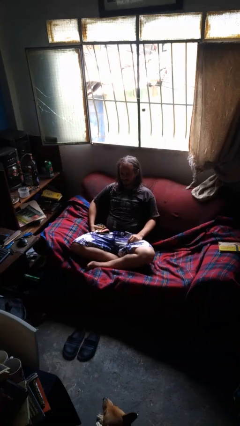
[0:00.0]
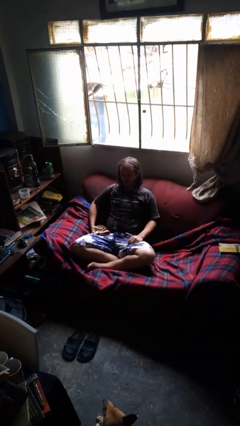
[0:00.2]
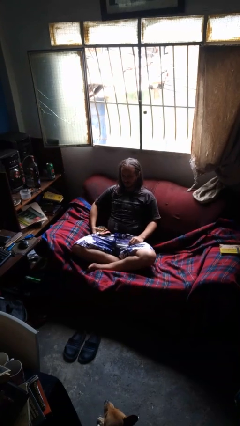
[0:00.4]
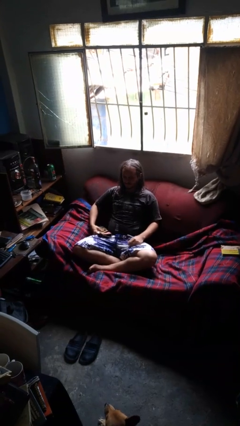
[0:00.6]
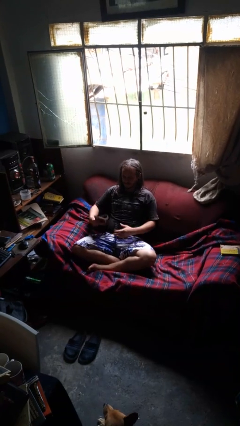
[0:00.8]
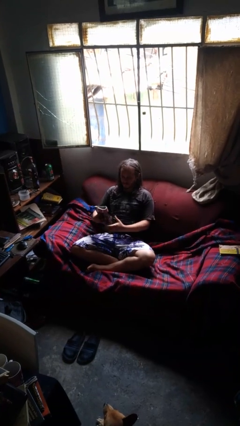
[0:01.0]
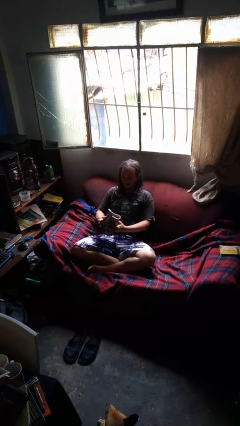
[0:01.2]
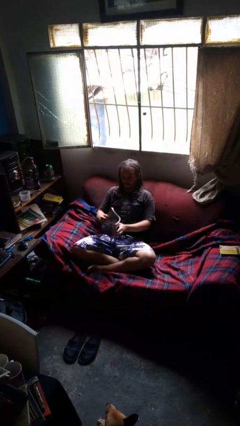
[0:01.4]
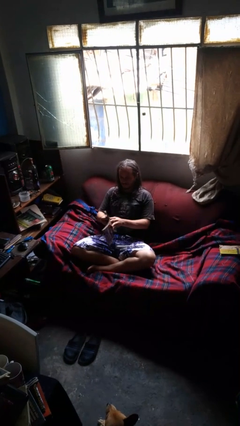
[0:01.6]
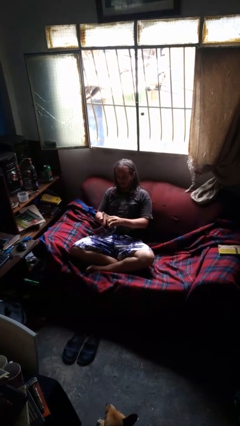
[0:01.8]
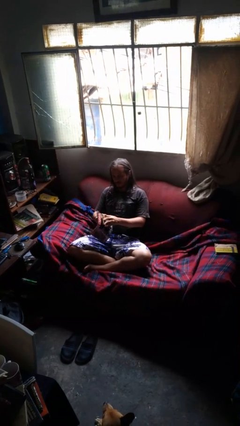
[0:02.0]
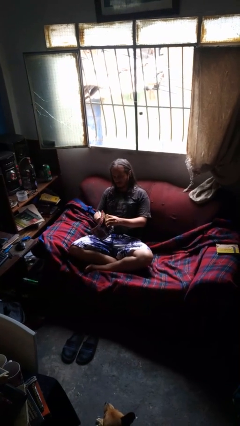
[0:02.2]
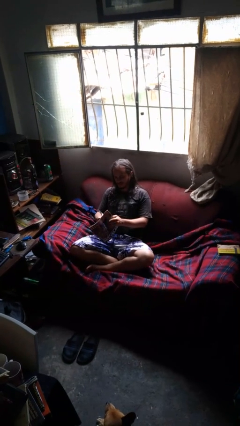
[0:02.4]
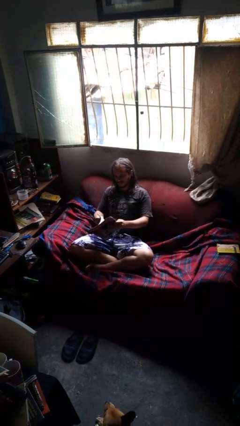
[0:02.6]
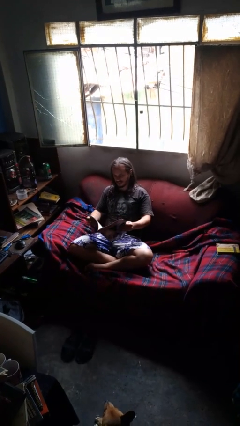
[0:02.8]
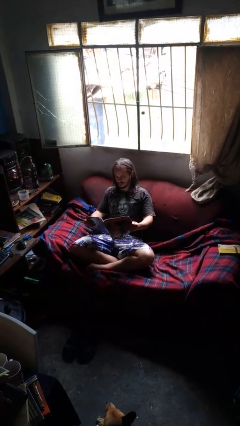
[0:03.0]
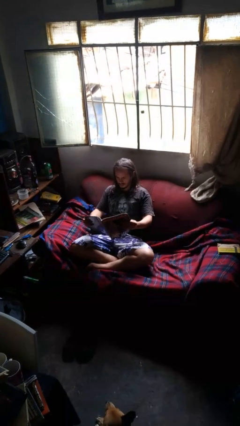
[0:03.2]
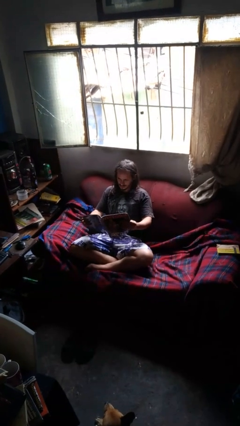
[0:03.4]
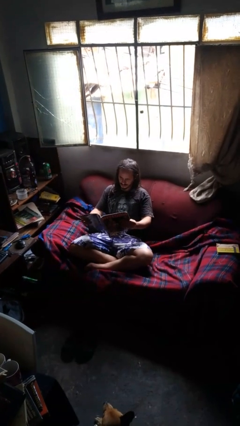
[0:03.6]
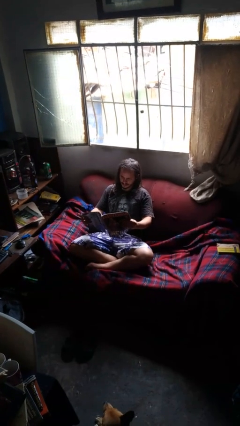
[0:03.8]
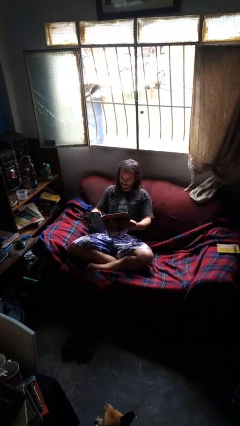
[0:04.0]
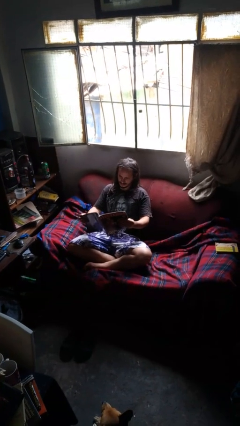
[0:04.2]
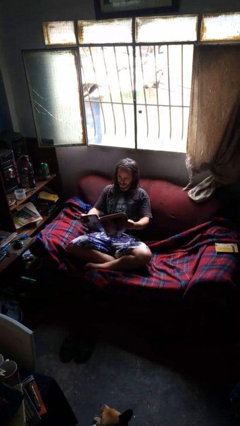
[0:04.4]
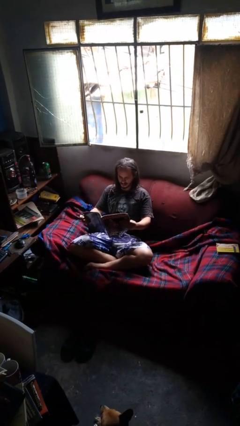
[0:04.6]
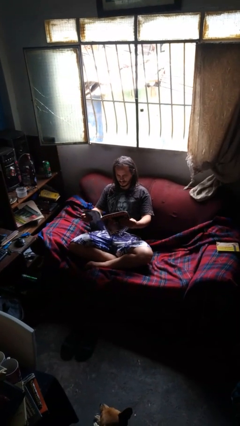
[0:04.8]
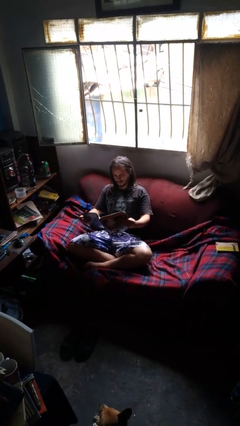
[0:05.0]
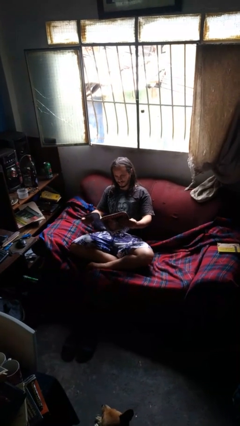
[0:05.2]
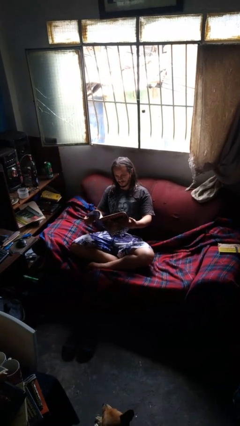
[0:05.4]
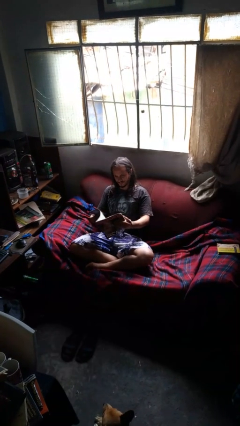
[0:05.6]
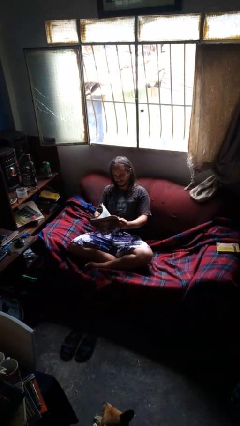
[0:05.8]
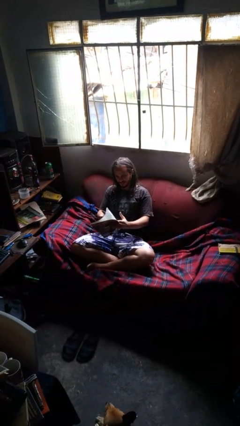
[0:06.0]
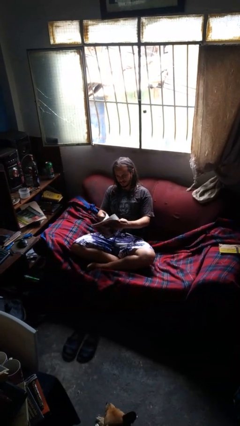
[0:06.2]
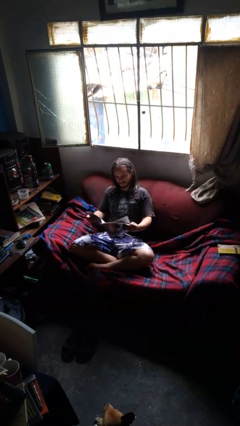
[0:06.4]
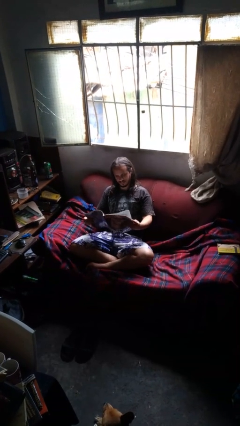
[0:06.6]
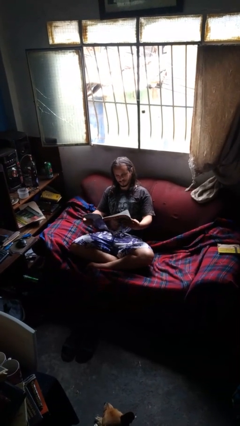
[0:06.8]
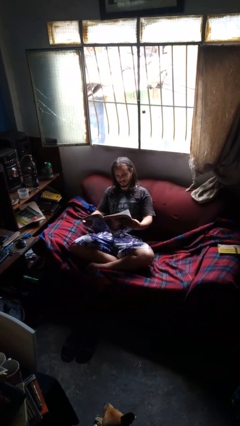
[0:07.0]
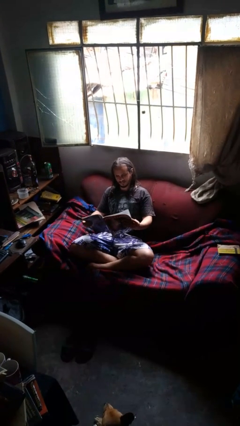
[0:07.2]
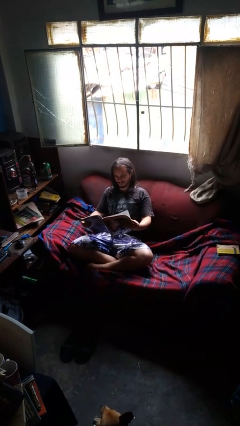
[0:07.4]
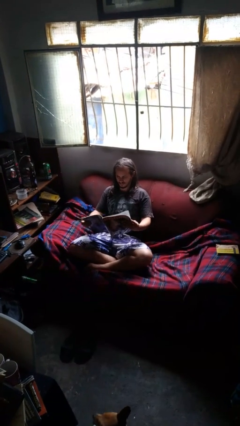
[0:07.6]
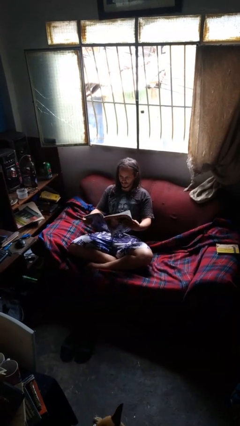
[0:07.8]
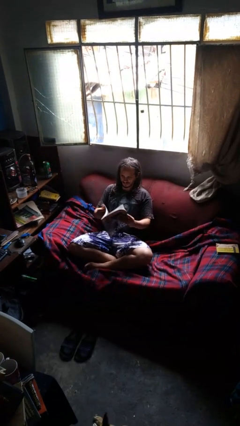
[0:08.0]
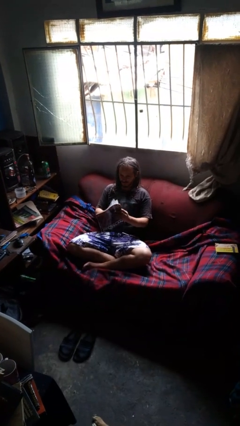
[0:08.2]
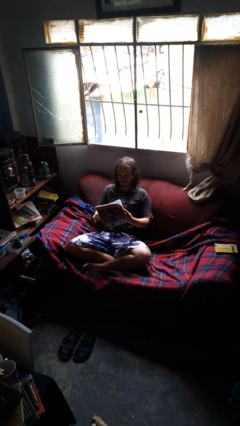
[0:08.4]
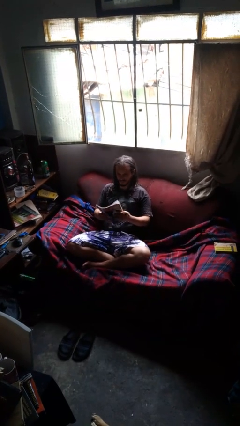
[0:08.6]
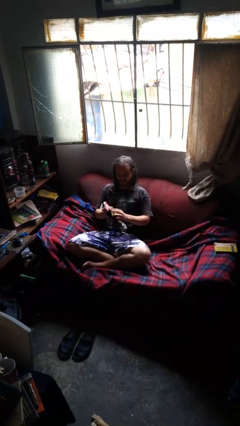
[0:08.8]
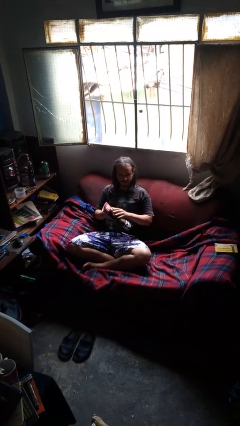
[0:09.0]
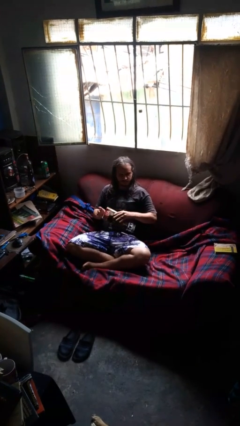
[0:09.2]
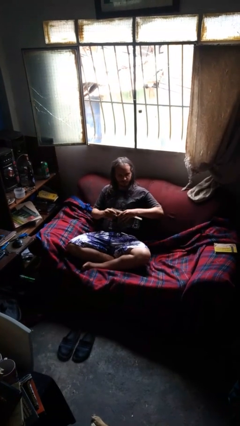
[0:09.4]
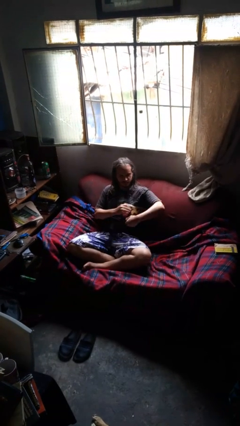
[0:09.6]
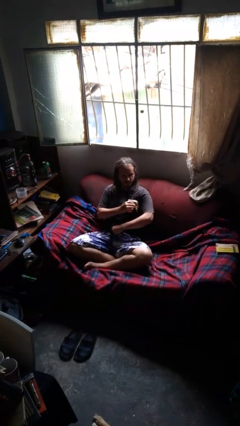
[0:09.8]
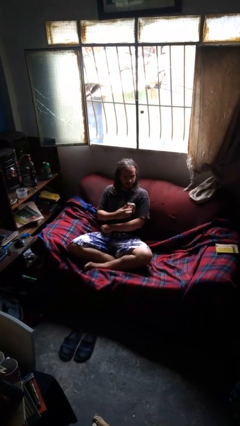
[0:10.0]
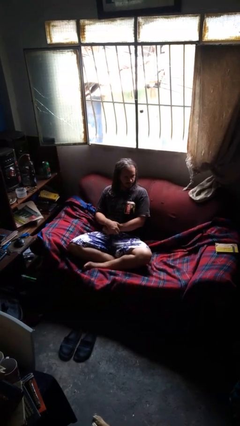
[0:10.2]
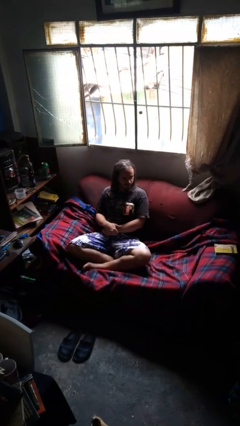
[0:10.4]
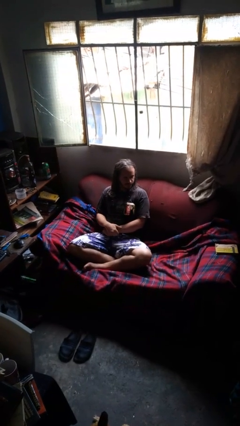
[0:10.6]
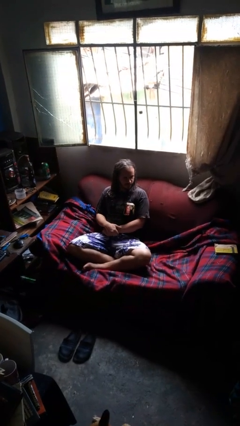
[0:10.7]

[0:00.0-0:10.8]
person reads magazine

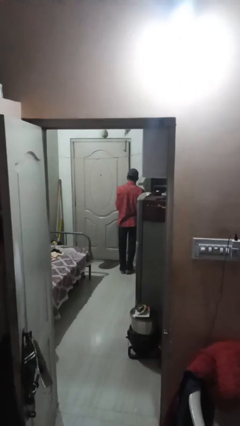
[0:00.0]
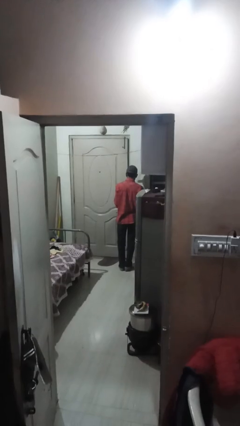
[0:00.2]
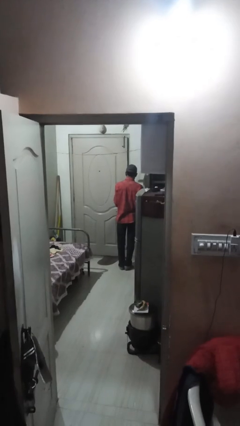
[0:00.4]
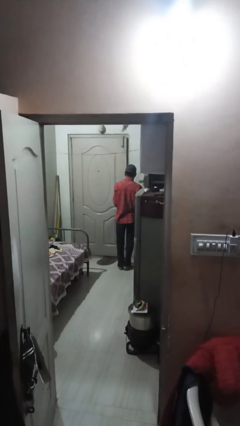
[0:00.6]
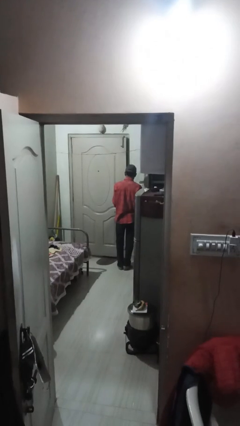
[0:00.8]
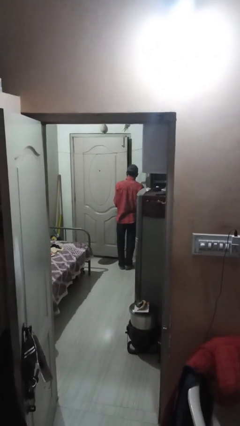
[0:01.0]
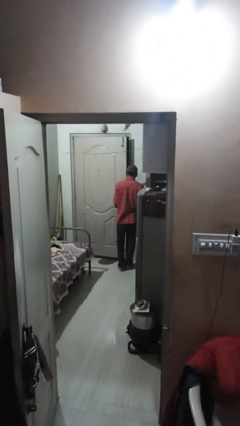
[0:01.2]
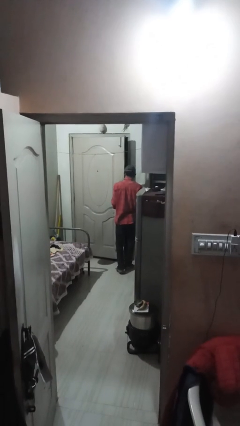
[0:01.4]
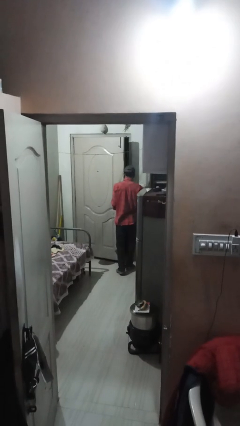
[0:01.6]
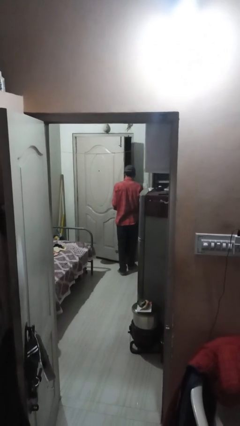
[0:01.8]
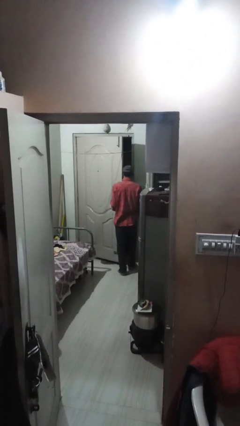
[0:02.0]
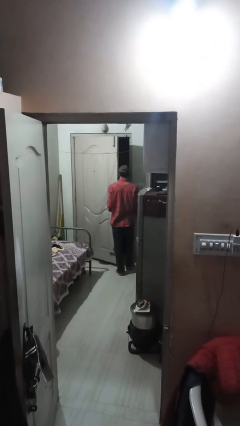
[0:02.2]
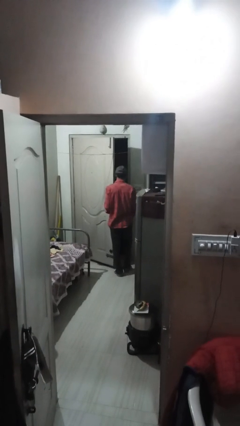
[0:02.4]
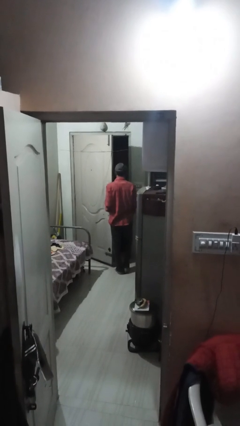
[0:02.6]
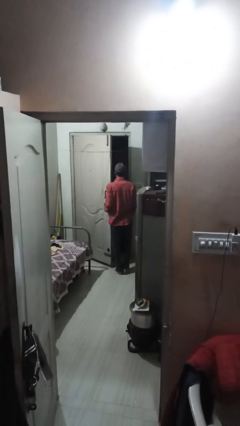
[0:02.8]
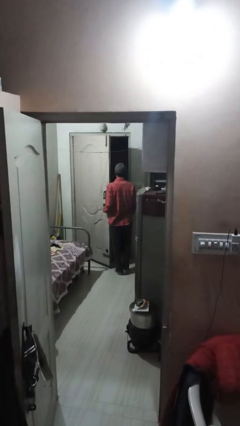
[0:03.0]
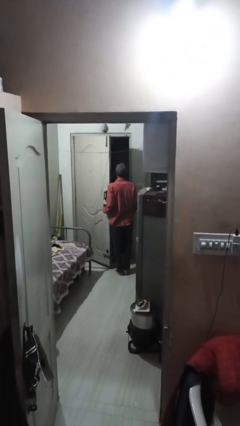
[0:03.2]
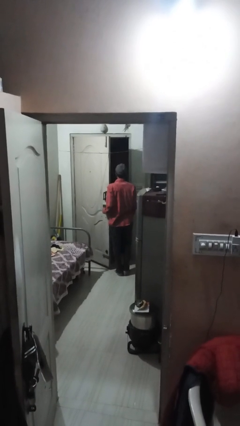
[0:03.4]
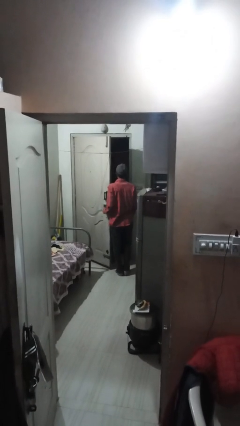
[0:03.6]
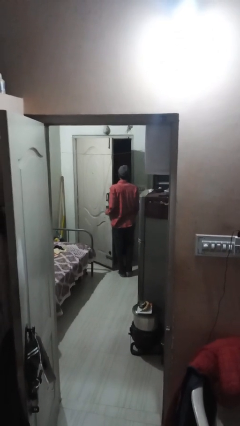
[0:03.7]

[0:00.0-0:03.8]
person opens facility door

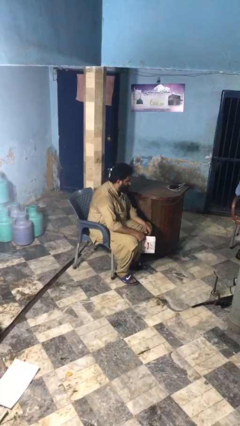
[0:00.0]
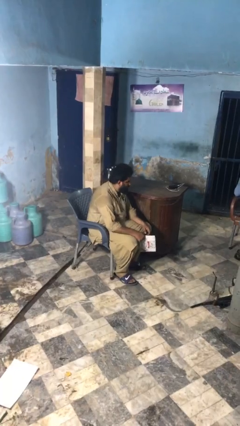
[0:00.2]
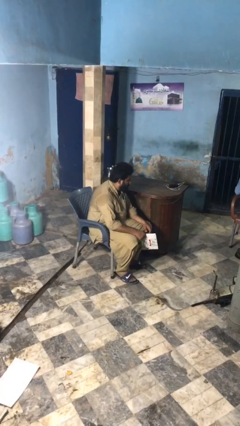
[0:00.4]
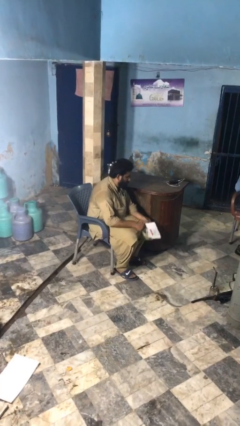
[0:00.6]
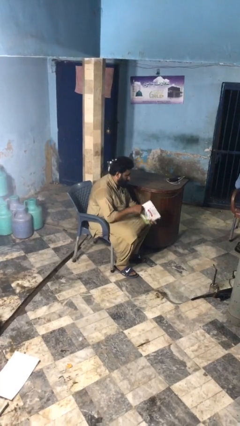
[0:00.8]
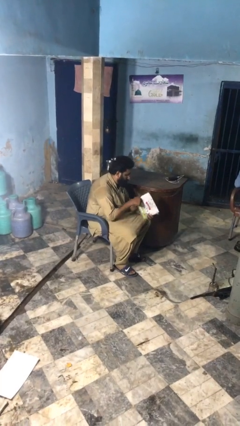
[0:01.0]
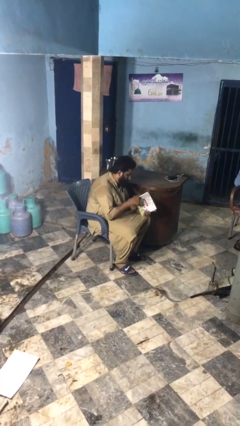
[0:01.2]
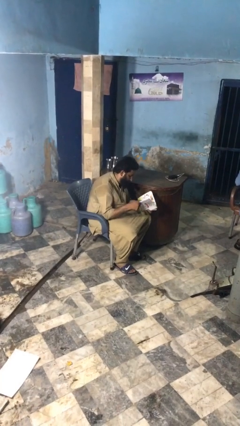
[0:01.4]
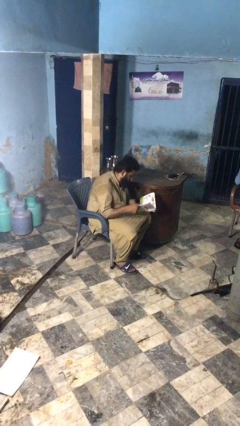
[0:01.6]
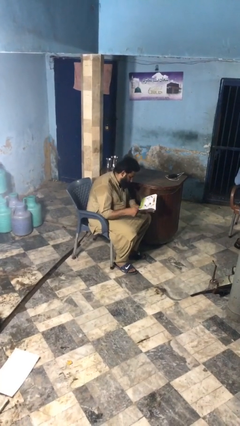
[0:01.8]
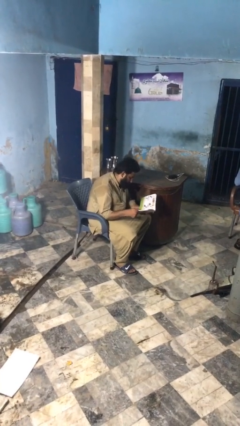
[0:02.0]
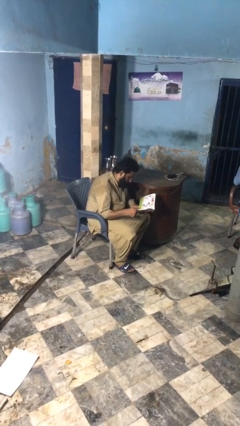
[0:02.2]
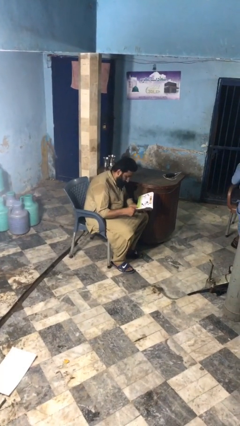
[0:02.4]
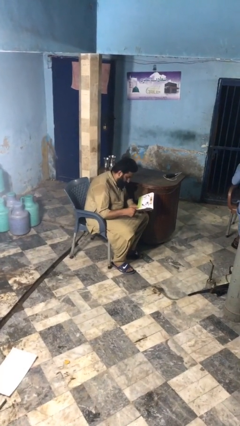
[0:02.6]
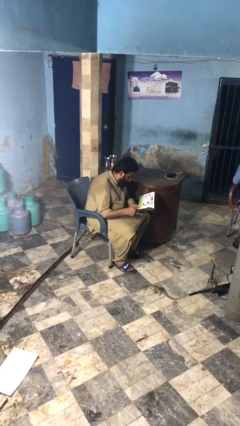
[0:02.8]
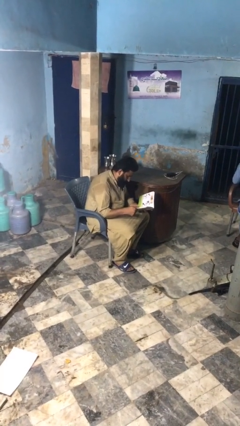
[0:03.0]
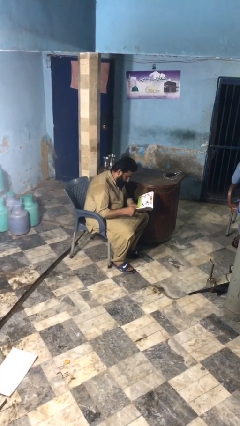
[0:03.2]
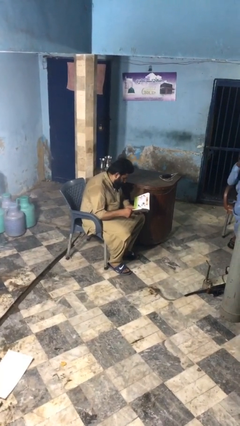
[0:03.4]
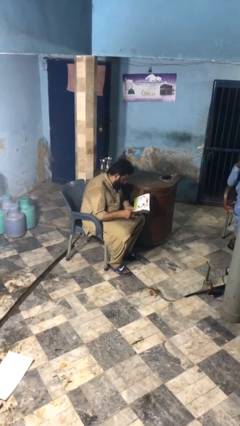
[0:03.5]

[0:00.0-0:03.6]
person reads document
